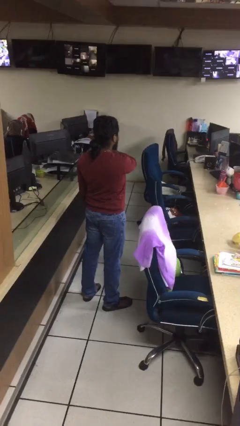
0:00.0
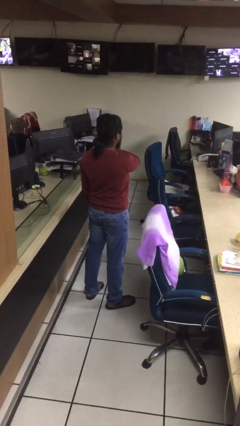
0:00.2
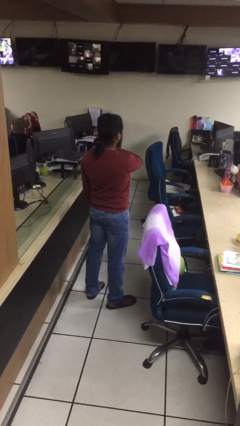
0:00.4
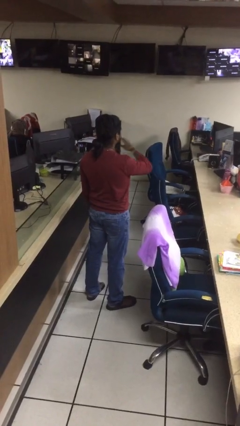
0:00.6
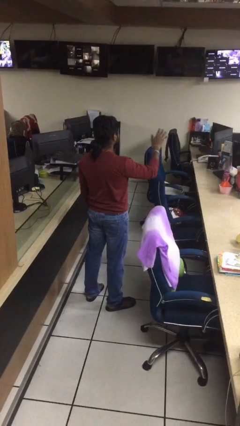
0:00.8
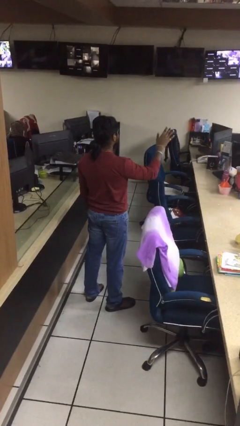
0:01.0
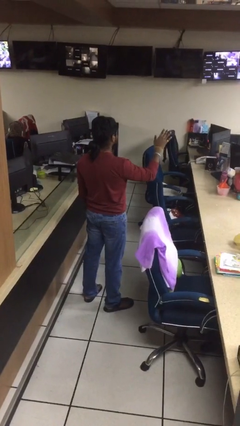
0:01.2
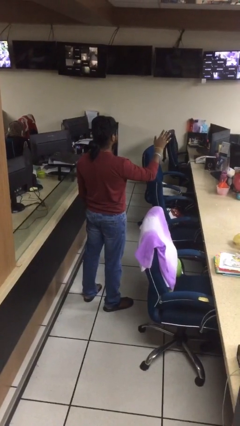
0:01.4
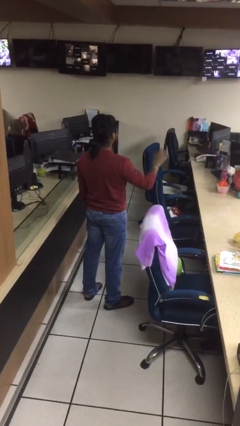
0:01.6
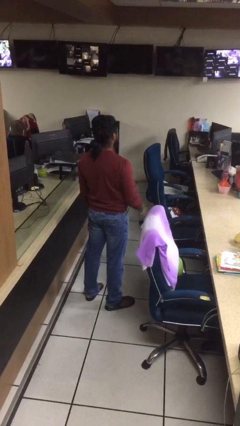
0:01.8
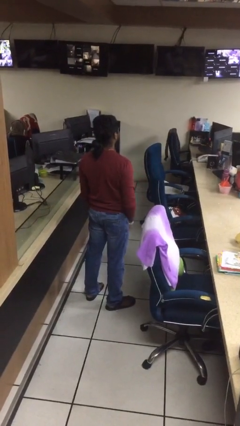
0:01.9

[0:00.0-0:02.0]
person gestures swipe right

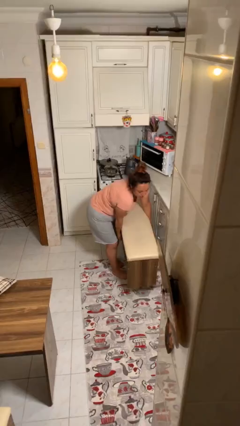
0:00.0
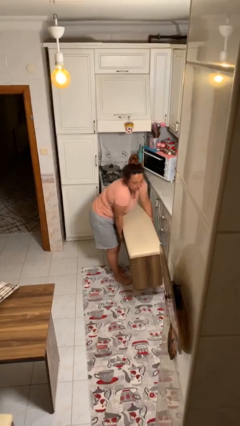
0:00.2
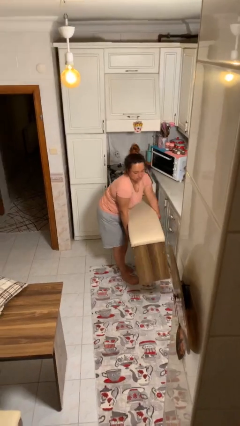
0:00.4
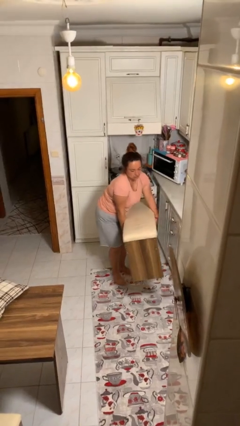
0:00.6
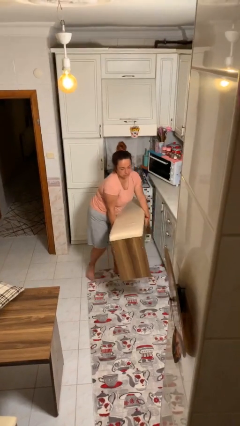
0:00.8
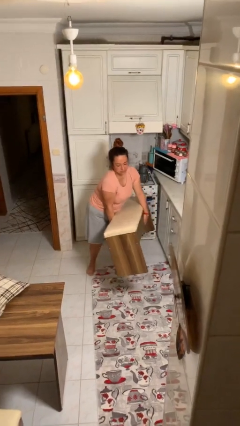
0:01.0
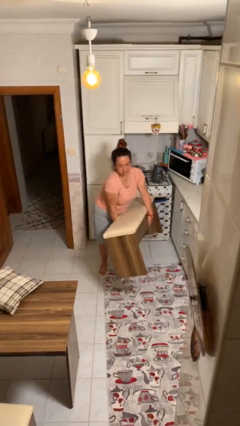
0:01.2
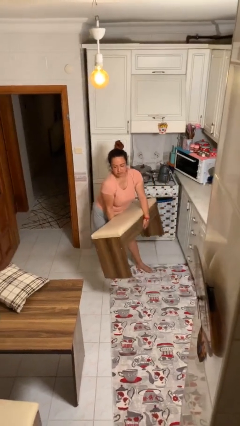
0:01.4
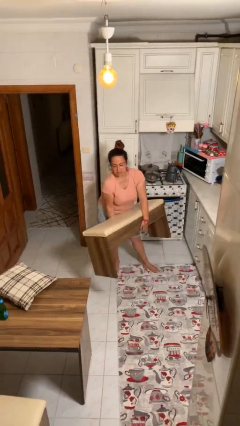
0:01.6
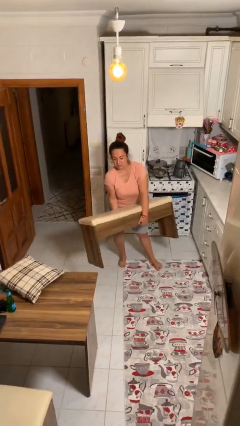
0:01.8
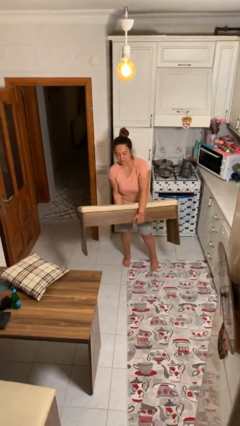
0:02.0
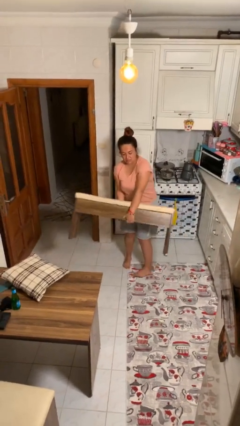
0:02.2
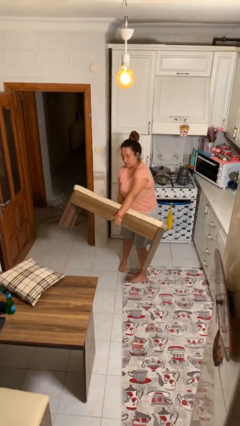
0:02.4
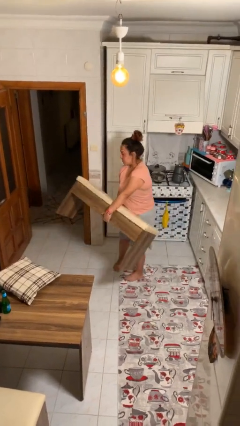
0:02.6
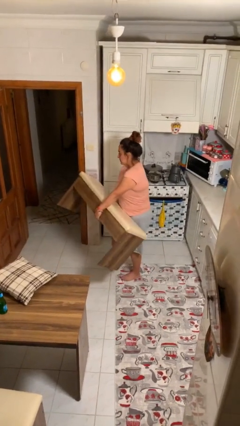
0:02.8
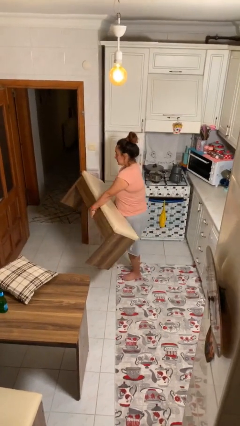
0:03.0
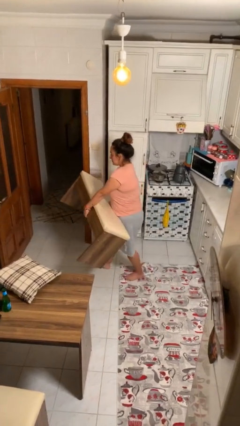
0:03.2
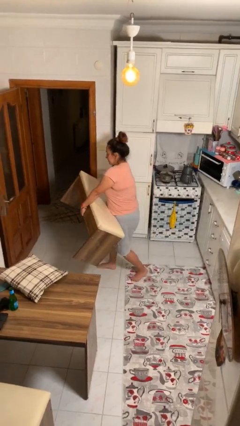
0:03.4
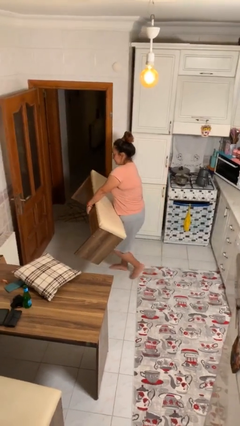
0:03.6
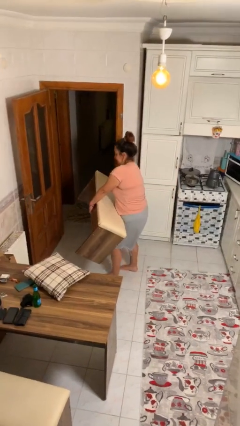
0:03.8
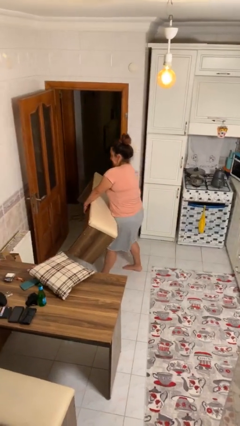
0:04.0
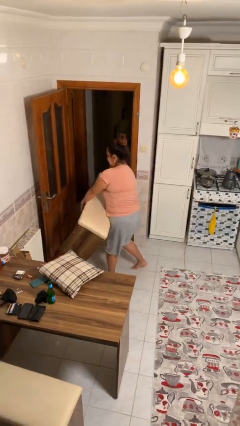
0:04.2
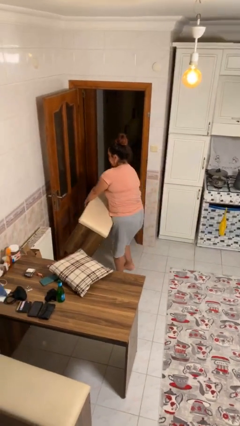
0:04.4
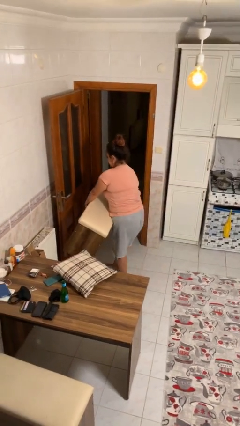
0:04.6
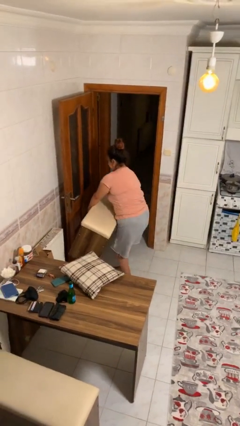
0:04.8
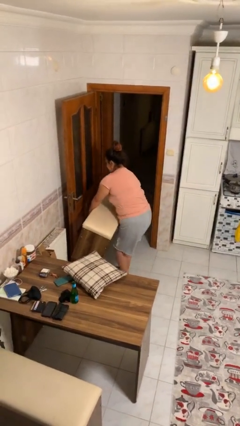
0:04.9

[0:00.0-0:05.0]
person carries heavy object

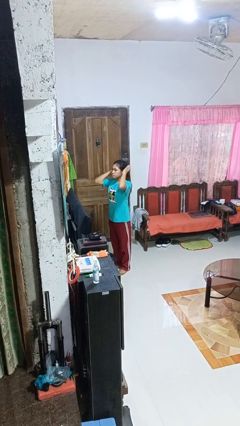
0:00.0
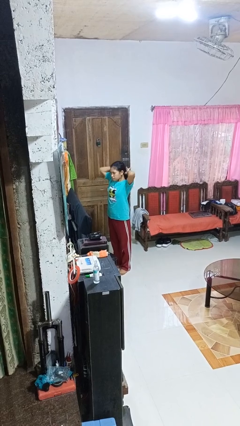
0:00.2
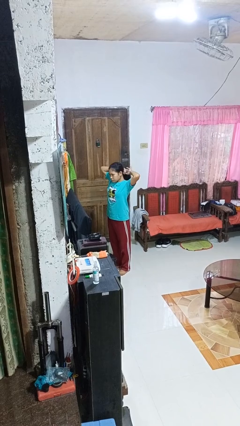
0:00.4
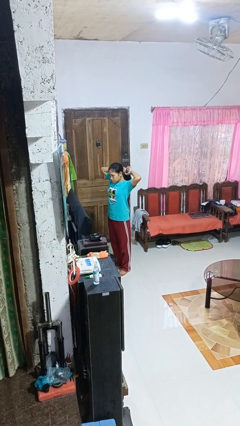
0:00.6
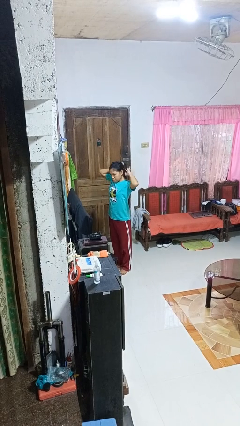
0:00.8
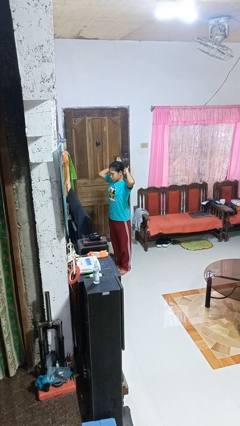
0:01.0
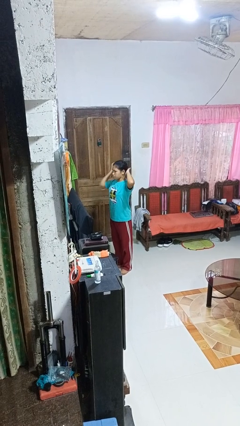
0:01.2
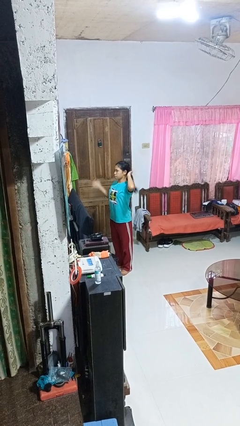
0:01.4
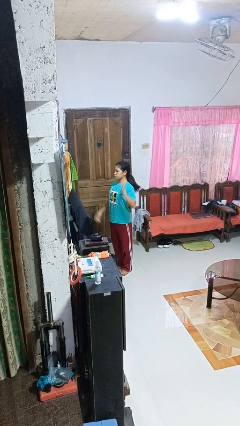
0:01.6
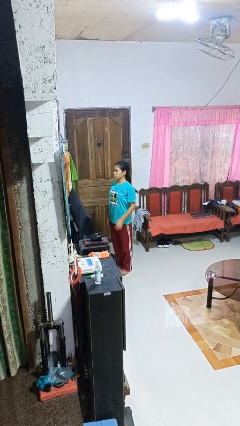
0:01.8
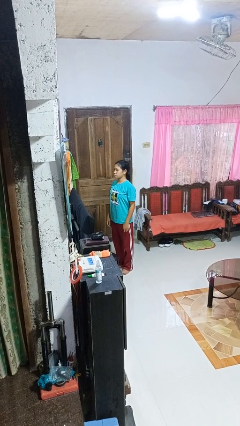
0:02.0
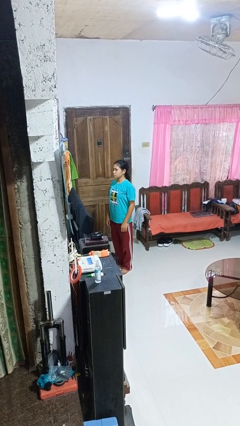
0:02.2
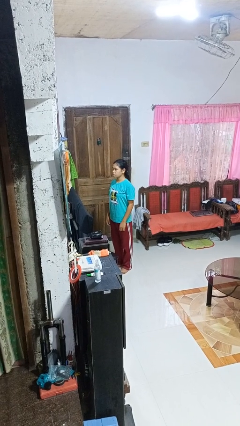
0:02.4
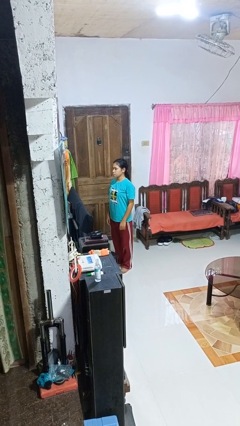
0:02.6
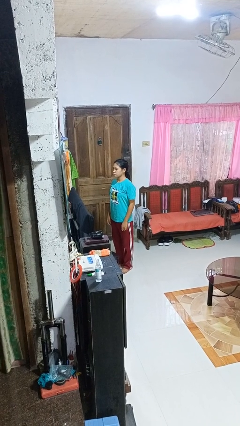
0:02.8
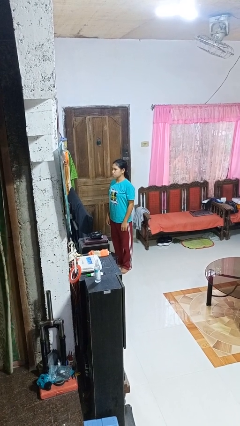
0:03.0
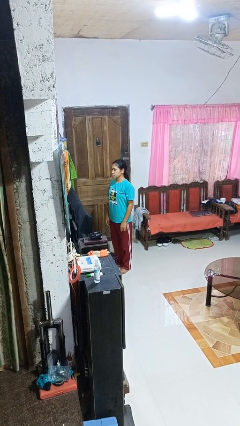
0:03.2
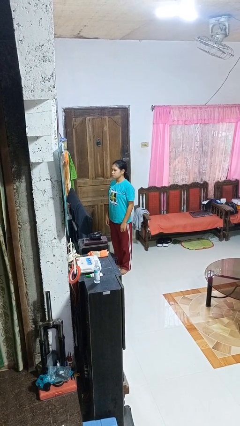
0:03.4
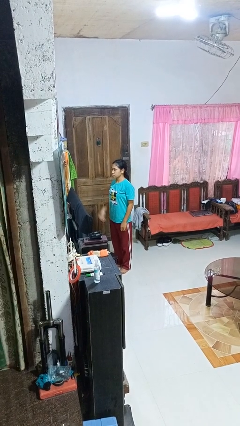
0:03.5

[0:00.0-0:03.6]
person puts hair in ponytail

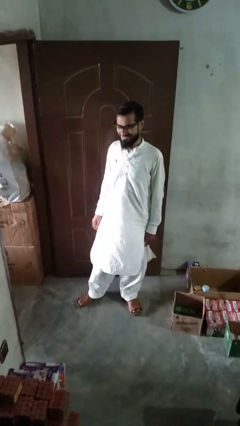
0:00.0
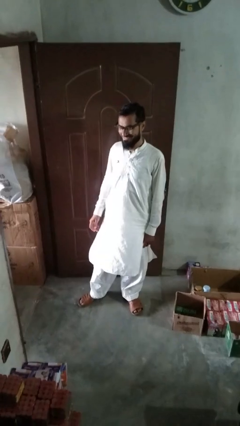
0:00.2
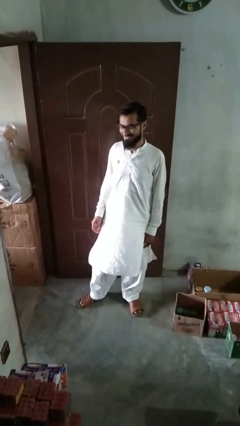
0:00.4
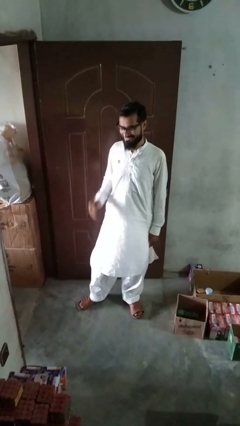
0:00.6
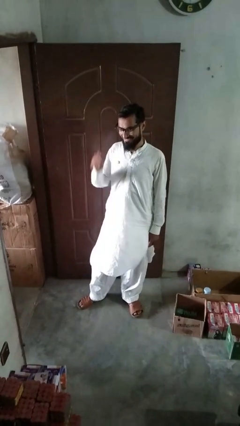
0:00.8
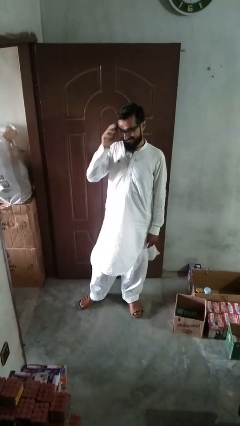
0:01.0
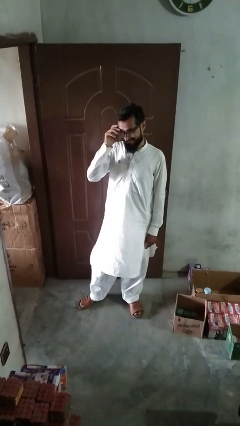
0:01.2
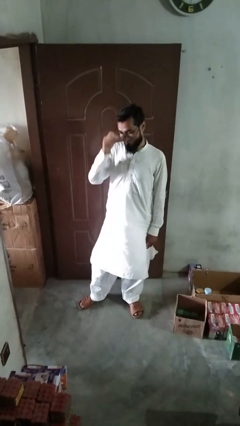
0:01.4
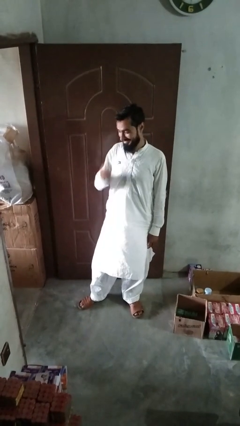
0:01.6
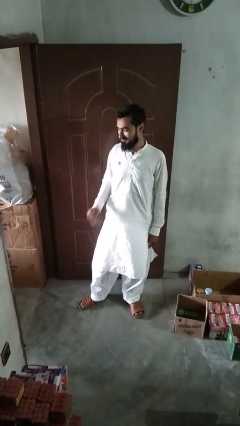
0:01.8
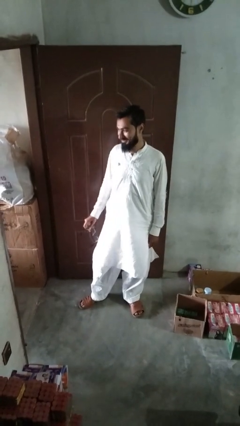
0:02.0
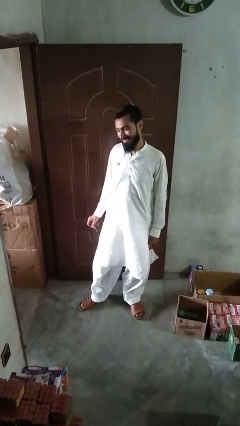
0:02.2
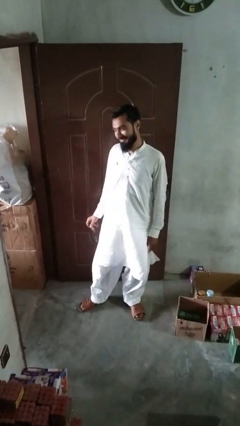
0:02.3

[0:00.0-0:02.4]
person takes off glasses

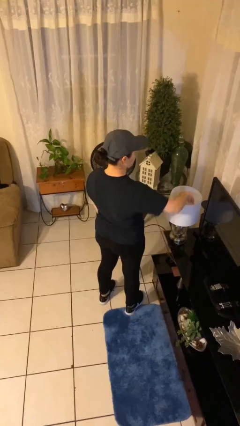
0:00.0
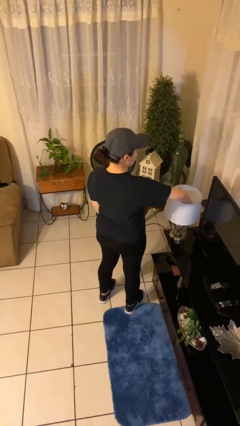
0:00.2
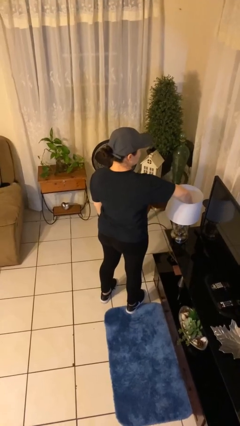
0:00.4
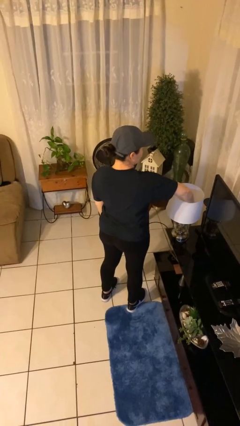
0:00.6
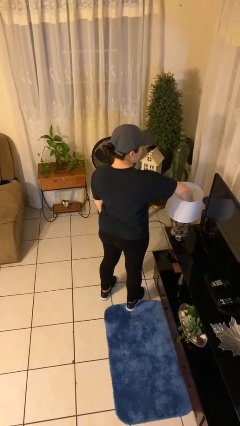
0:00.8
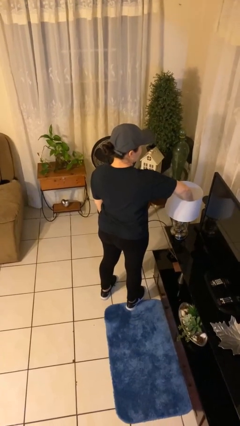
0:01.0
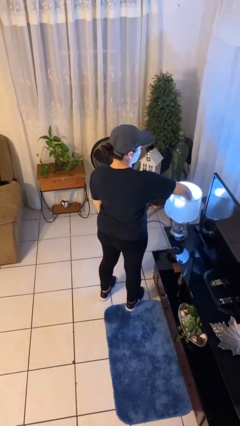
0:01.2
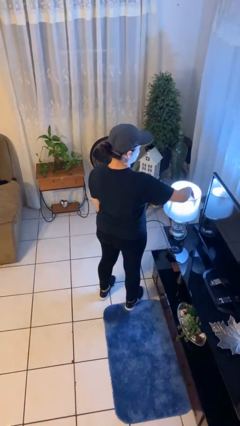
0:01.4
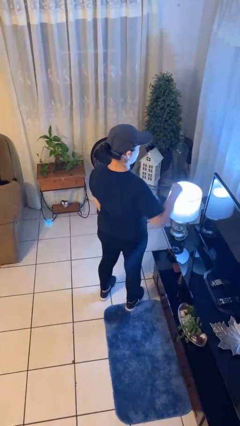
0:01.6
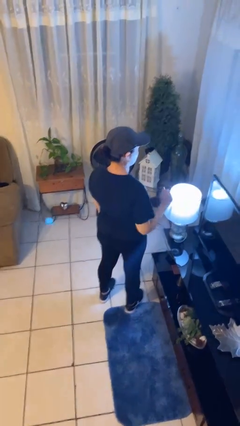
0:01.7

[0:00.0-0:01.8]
person turns on lamp

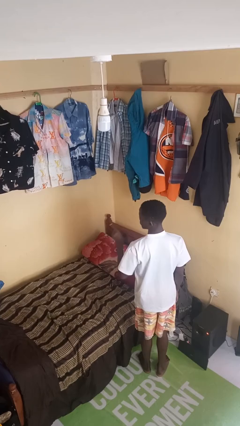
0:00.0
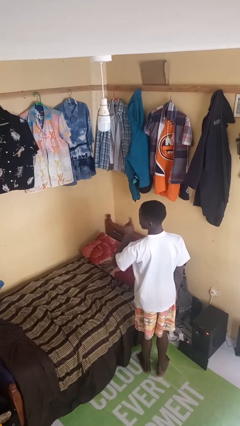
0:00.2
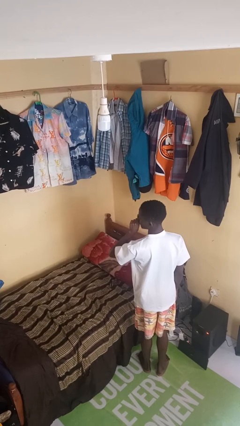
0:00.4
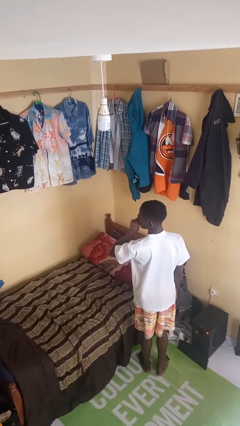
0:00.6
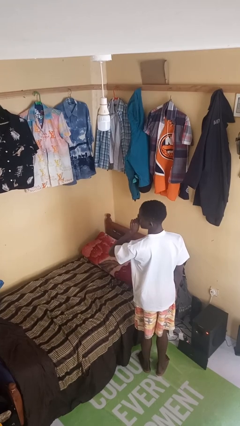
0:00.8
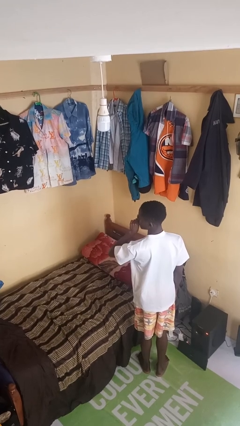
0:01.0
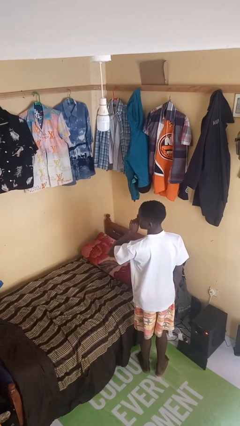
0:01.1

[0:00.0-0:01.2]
person gestures be quiet

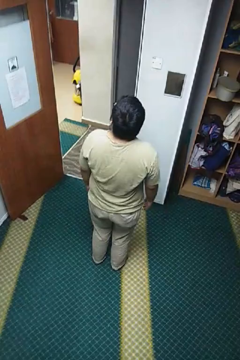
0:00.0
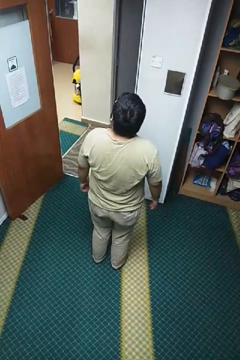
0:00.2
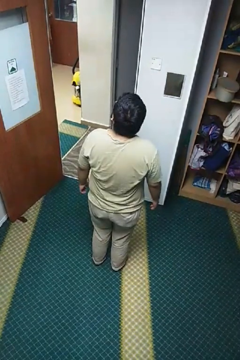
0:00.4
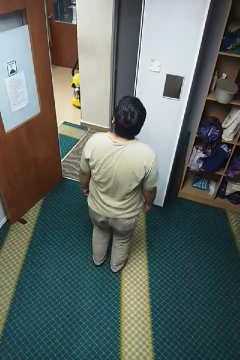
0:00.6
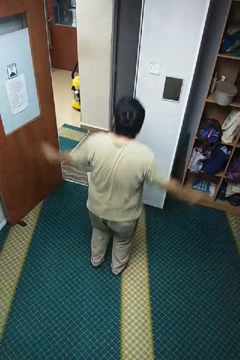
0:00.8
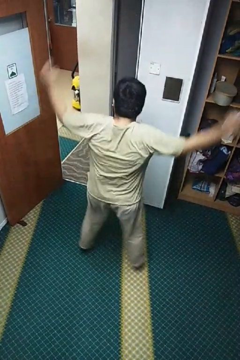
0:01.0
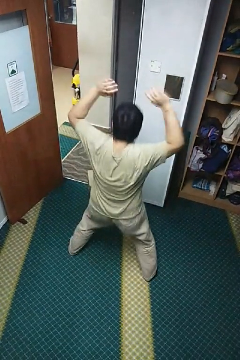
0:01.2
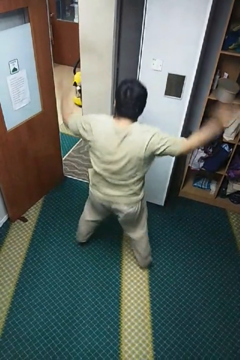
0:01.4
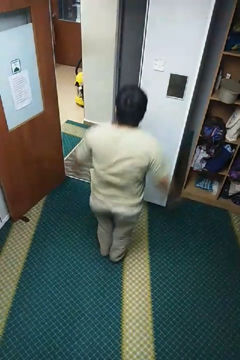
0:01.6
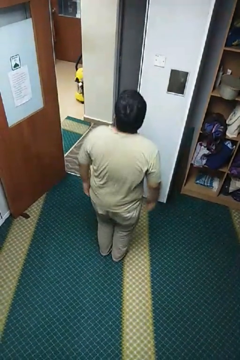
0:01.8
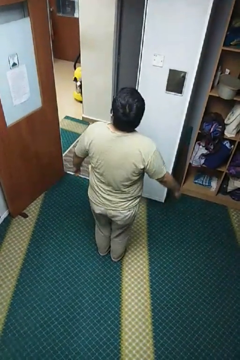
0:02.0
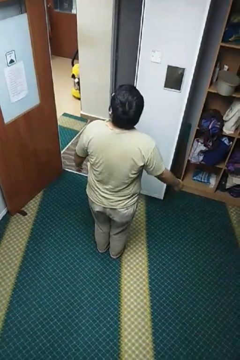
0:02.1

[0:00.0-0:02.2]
person exercises with jumping jacks
